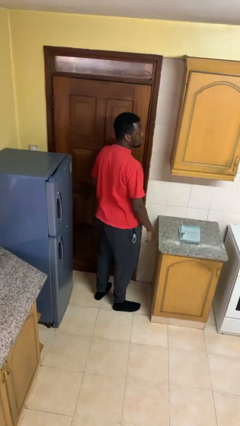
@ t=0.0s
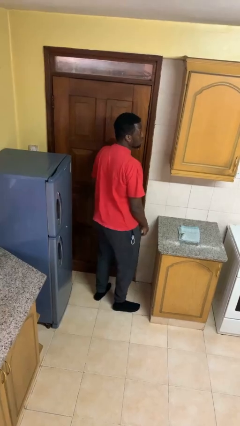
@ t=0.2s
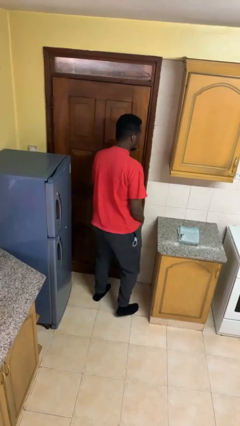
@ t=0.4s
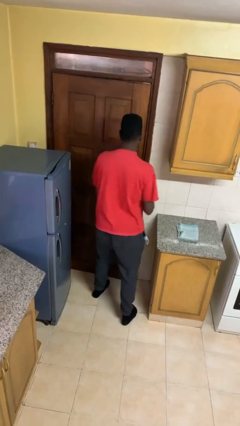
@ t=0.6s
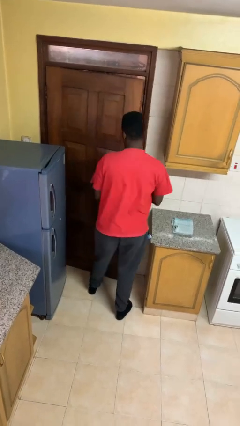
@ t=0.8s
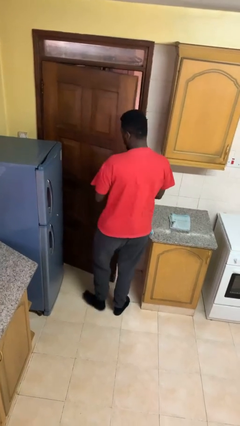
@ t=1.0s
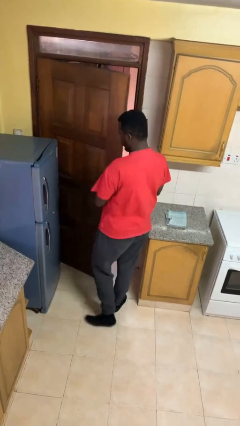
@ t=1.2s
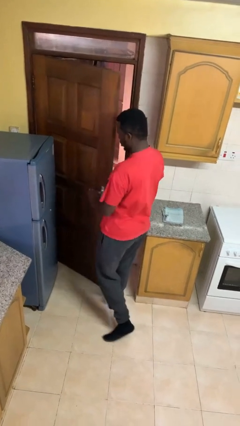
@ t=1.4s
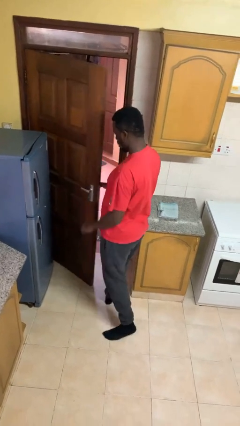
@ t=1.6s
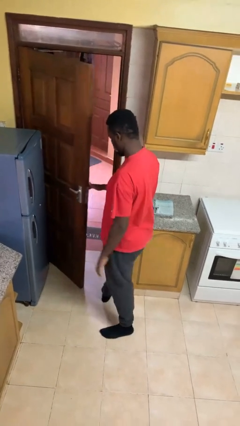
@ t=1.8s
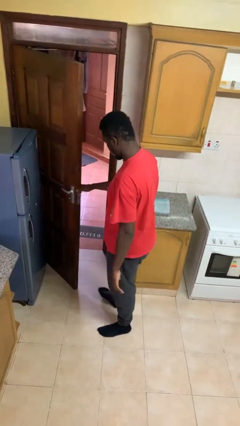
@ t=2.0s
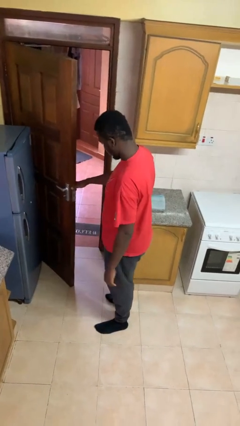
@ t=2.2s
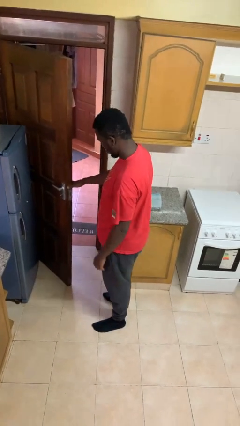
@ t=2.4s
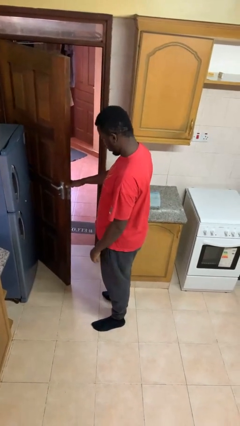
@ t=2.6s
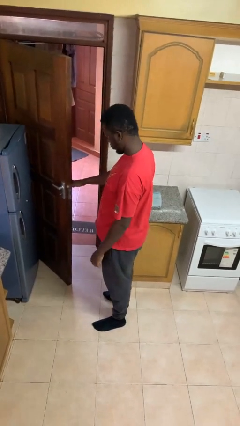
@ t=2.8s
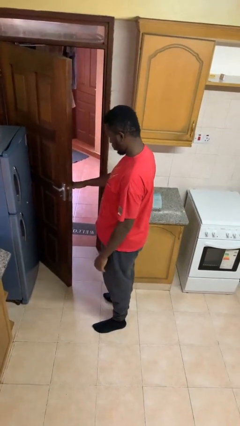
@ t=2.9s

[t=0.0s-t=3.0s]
person opens facility door

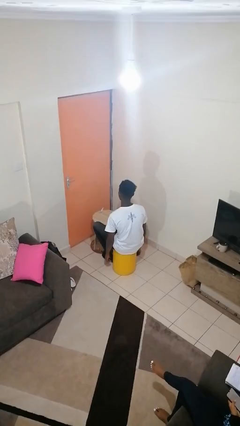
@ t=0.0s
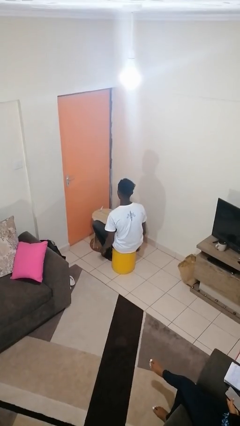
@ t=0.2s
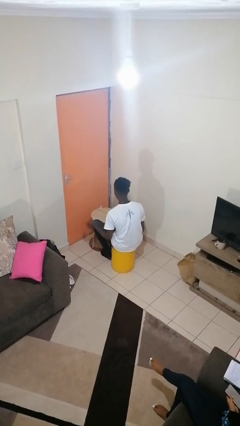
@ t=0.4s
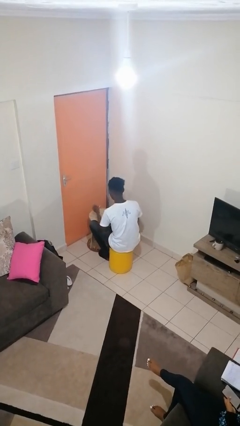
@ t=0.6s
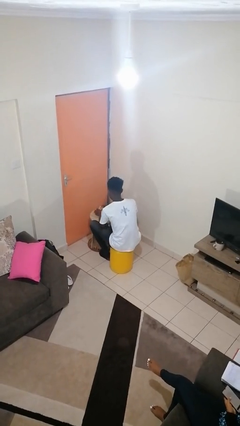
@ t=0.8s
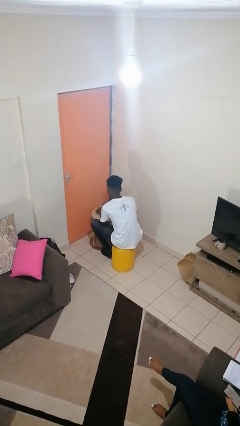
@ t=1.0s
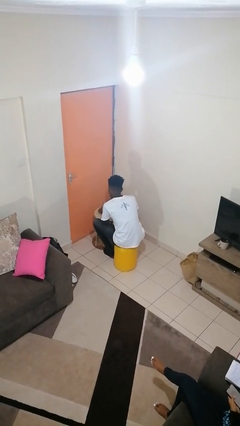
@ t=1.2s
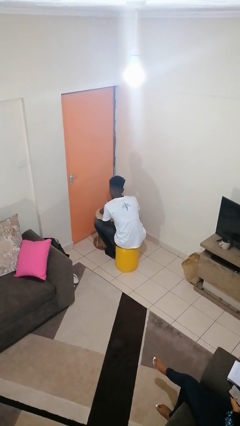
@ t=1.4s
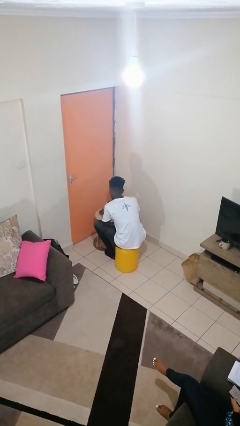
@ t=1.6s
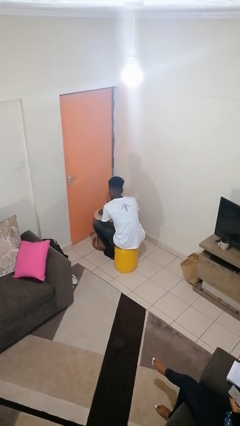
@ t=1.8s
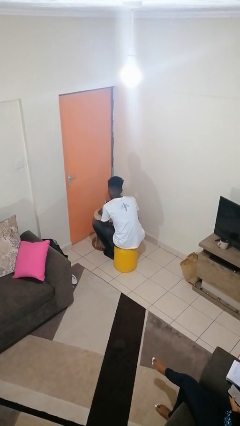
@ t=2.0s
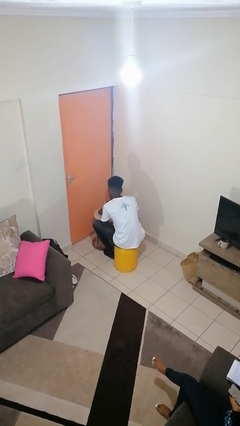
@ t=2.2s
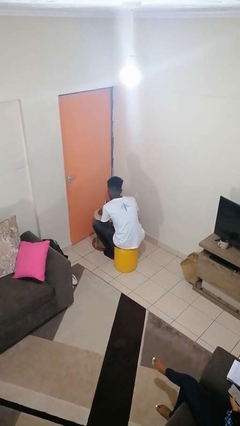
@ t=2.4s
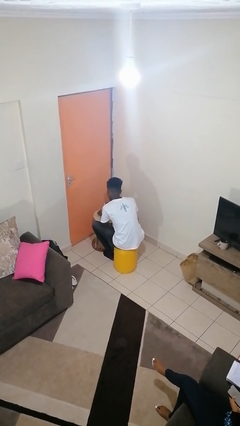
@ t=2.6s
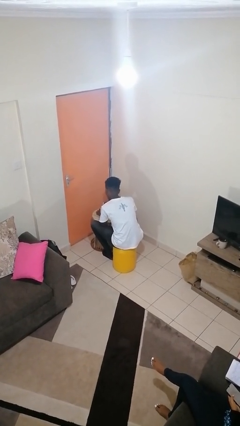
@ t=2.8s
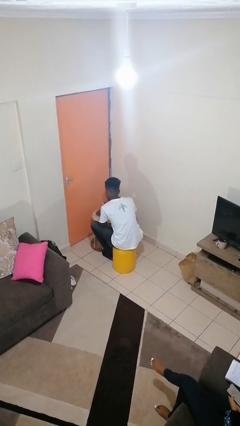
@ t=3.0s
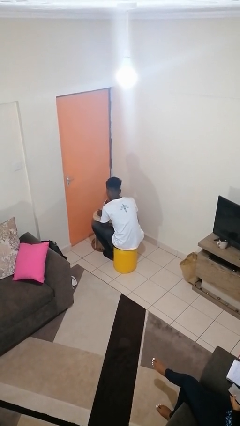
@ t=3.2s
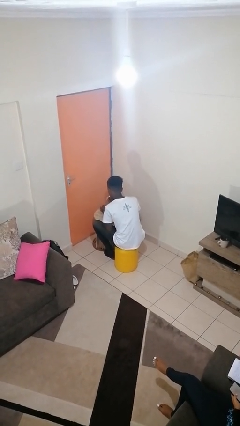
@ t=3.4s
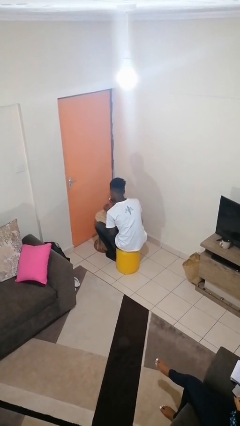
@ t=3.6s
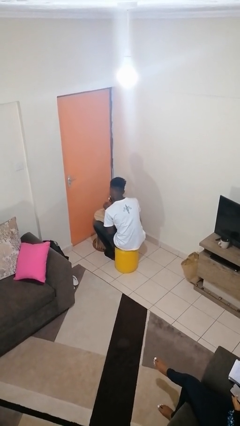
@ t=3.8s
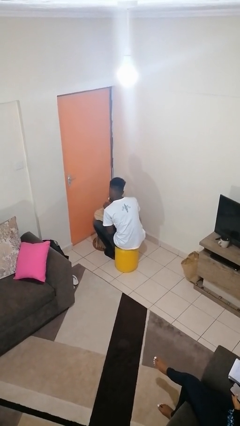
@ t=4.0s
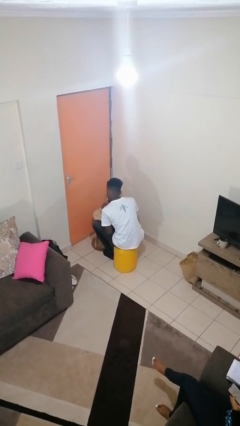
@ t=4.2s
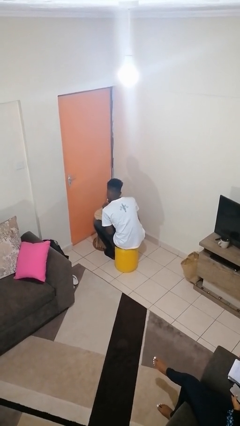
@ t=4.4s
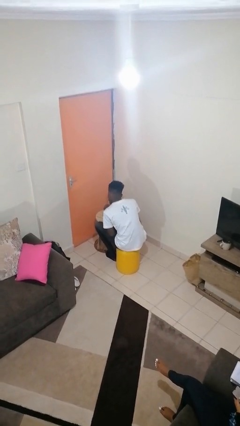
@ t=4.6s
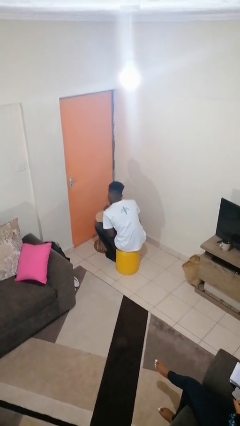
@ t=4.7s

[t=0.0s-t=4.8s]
person paints fingernails

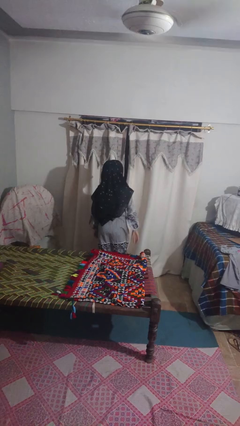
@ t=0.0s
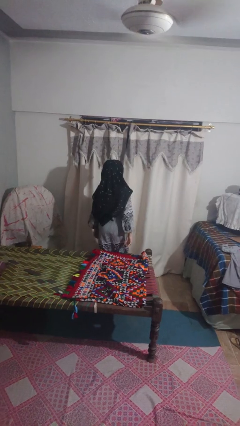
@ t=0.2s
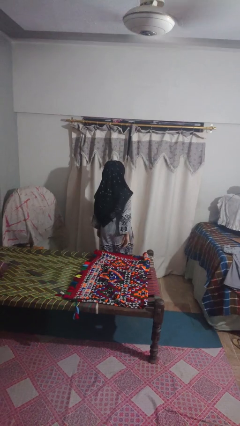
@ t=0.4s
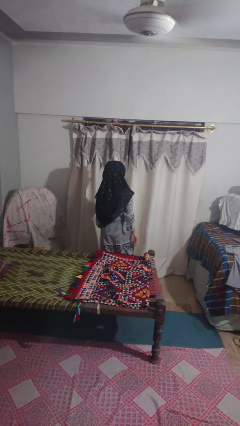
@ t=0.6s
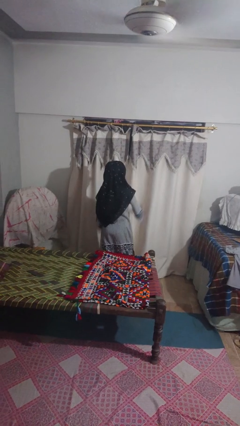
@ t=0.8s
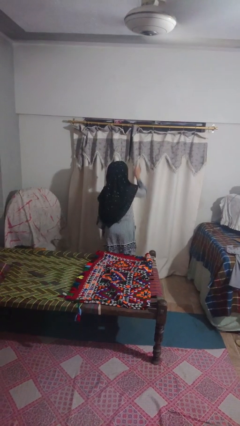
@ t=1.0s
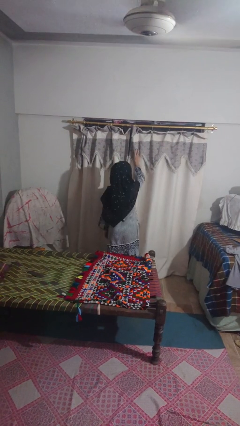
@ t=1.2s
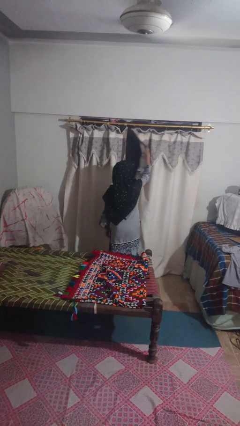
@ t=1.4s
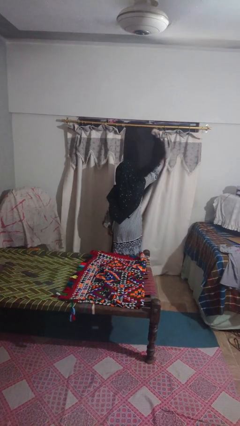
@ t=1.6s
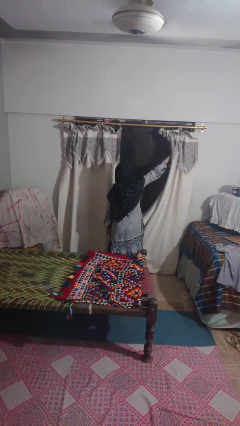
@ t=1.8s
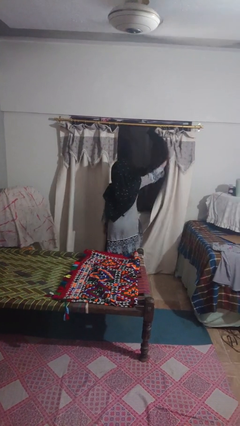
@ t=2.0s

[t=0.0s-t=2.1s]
person opens curtains

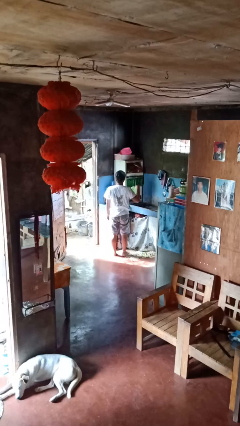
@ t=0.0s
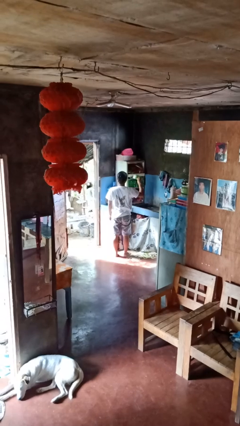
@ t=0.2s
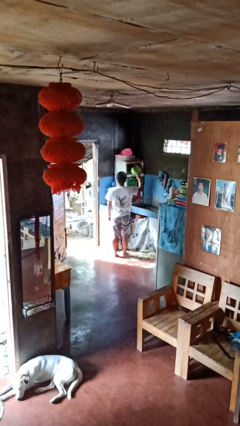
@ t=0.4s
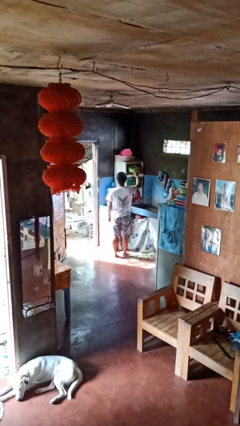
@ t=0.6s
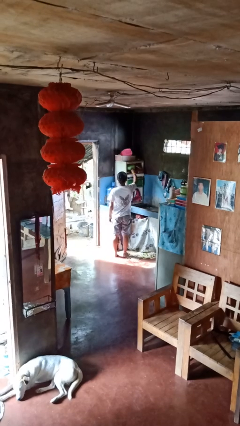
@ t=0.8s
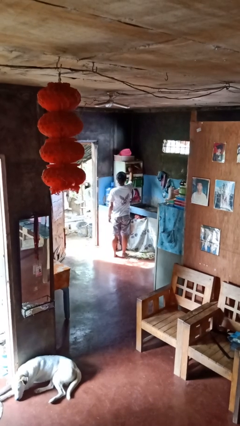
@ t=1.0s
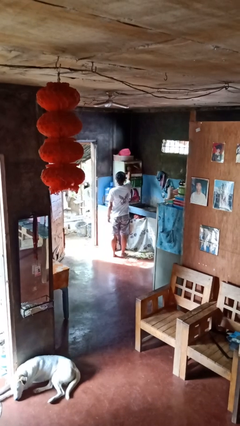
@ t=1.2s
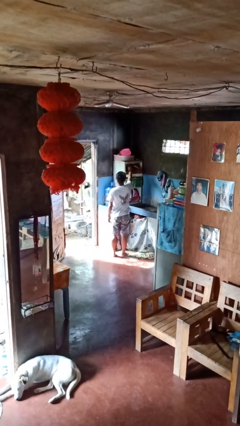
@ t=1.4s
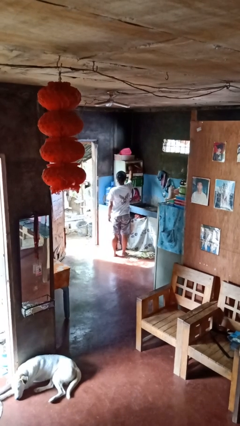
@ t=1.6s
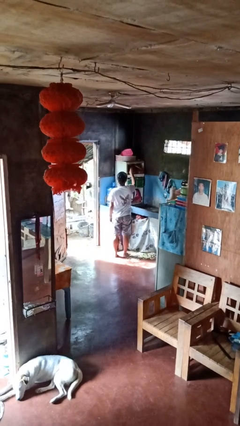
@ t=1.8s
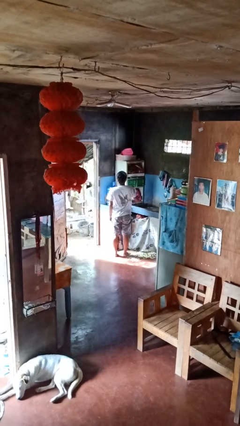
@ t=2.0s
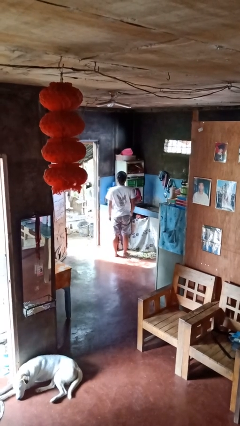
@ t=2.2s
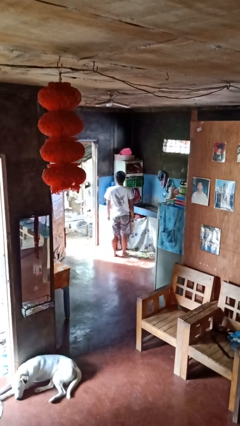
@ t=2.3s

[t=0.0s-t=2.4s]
person puts object in cabinet

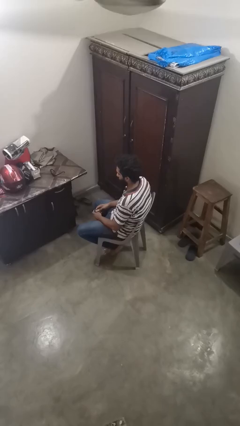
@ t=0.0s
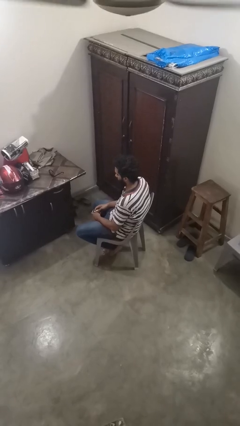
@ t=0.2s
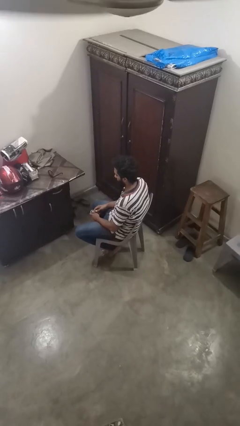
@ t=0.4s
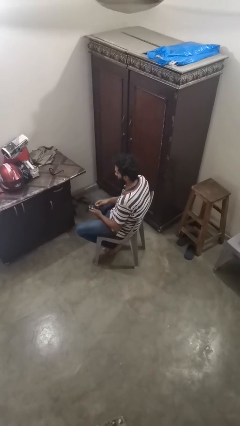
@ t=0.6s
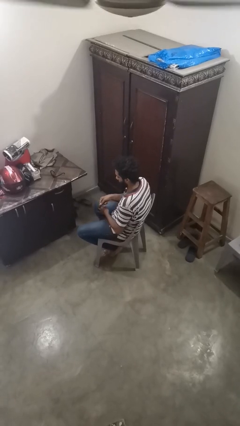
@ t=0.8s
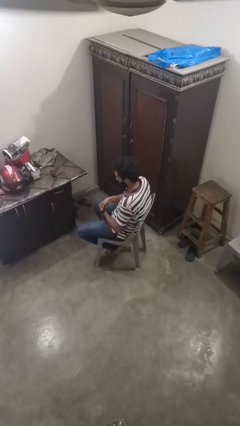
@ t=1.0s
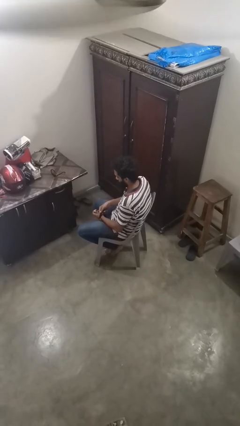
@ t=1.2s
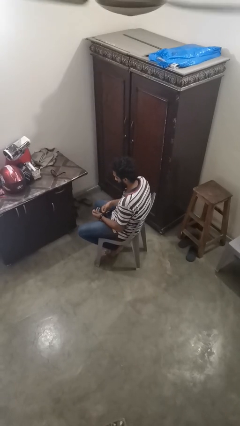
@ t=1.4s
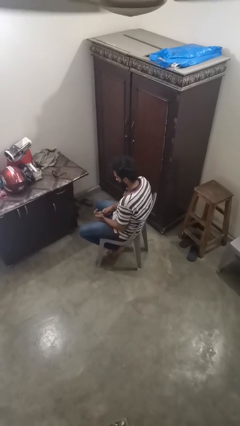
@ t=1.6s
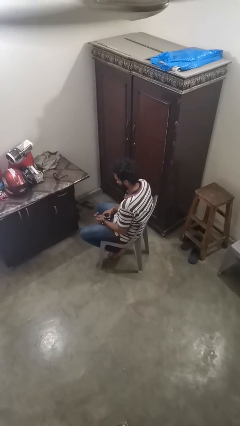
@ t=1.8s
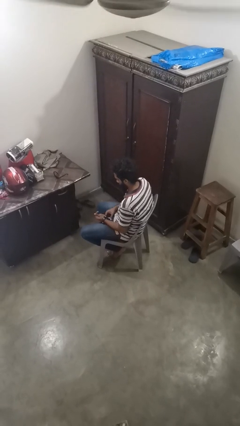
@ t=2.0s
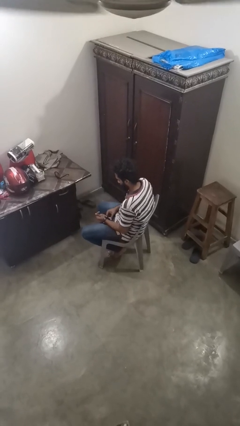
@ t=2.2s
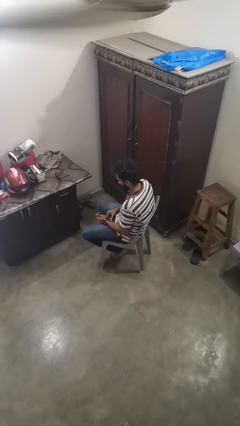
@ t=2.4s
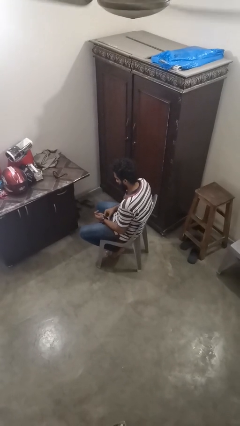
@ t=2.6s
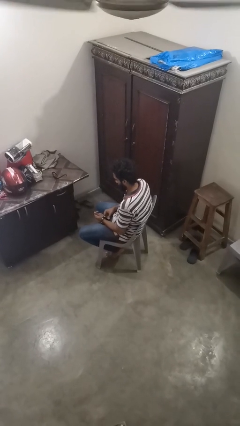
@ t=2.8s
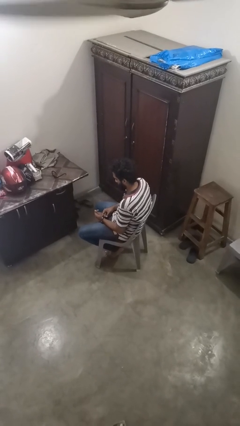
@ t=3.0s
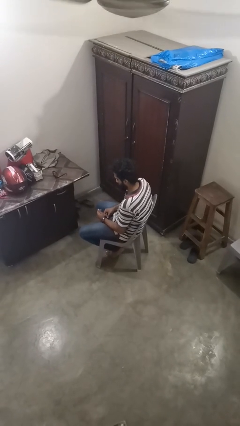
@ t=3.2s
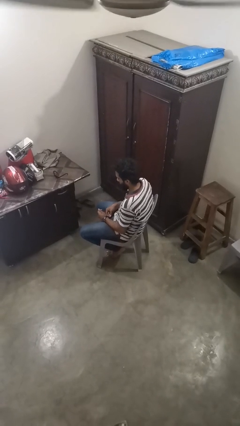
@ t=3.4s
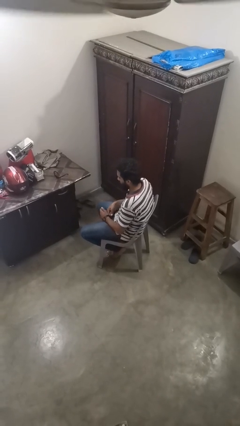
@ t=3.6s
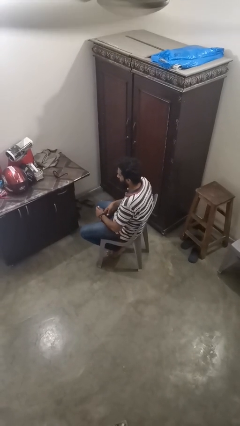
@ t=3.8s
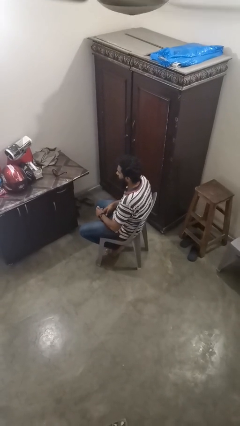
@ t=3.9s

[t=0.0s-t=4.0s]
person puts on wristwatch

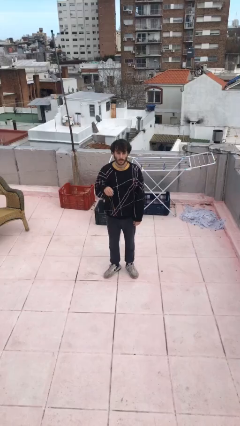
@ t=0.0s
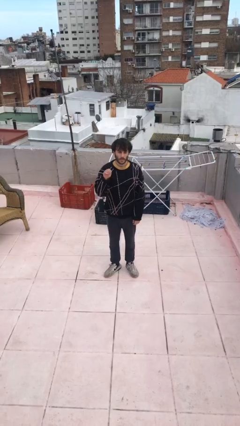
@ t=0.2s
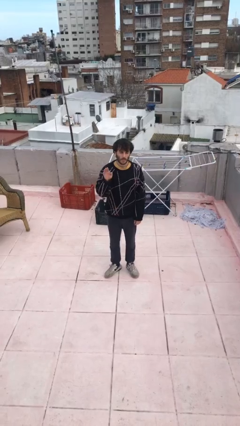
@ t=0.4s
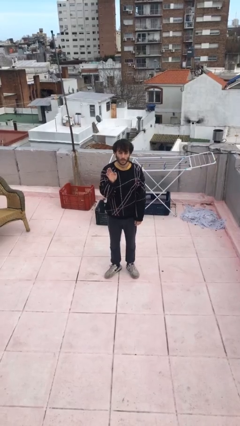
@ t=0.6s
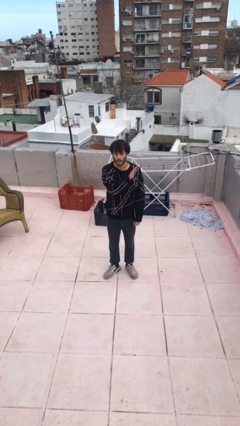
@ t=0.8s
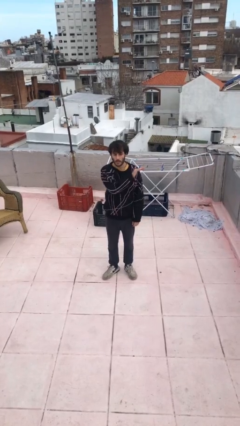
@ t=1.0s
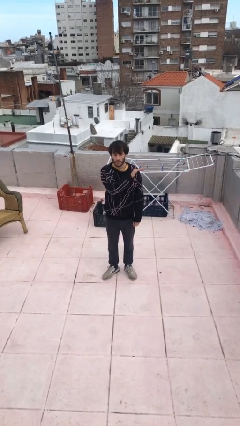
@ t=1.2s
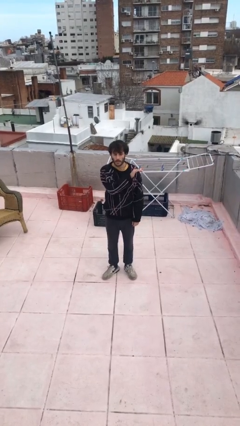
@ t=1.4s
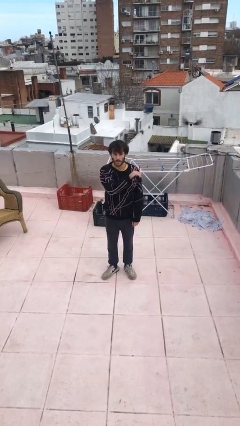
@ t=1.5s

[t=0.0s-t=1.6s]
person gestures swipe left
